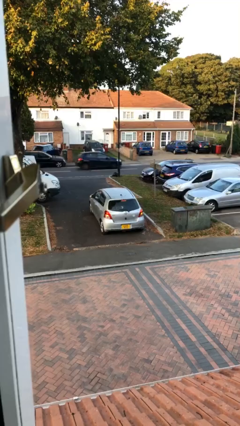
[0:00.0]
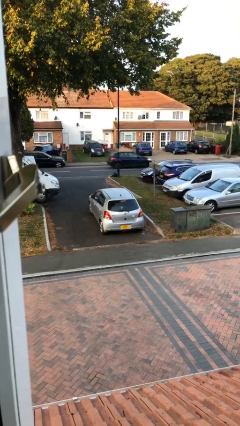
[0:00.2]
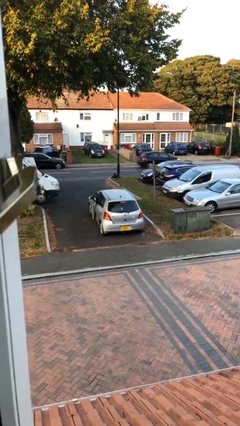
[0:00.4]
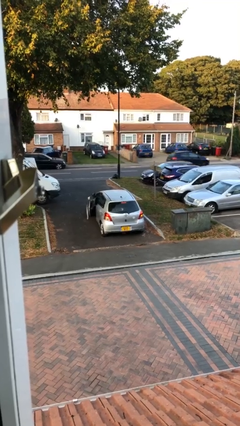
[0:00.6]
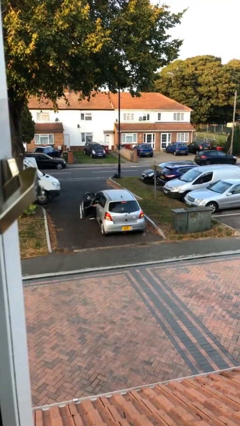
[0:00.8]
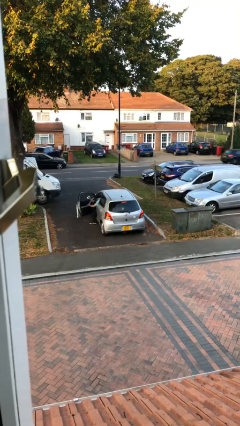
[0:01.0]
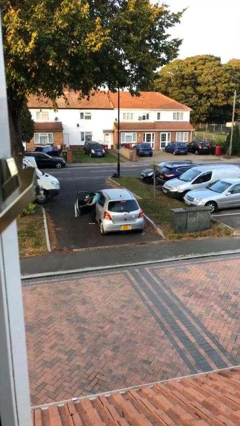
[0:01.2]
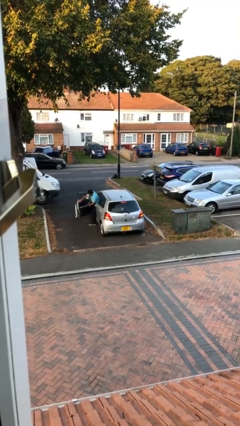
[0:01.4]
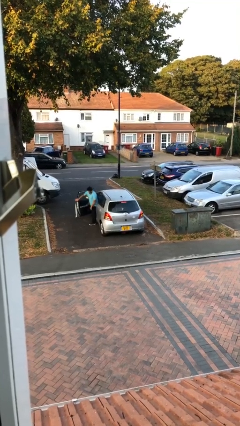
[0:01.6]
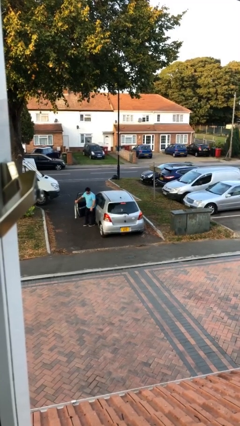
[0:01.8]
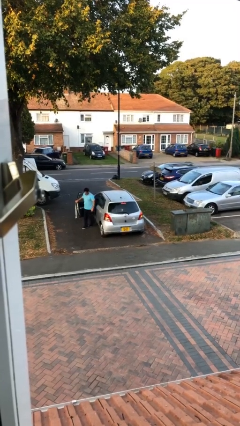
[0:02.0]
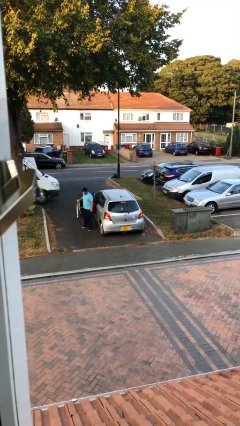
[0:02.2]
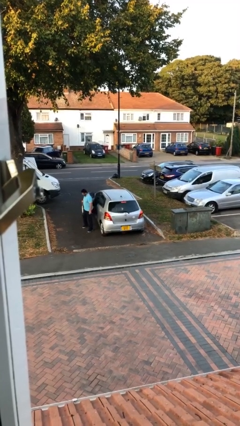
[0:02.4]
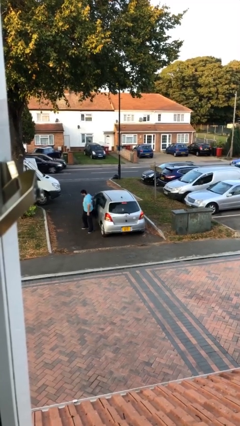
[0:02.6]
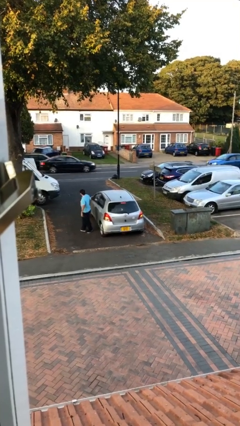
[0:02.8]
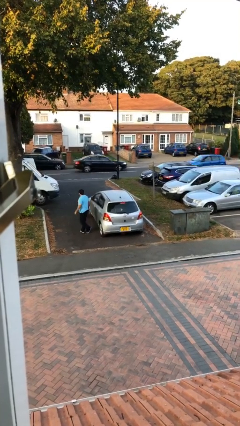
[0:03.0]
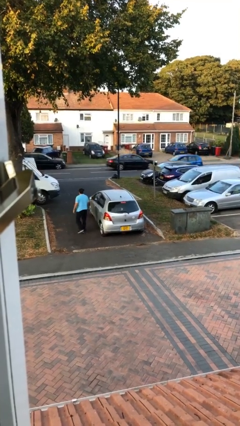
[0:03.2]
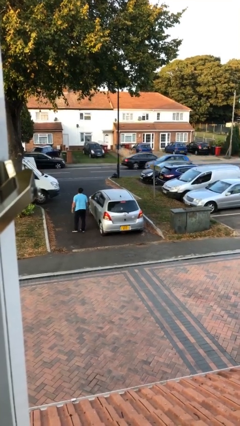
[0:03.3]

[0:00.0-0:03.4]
car drops off person

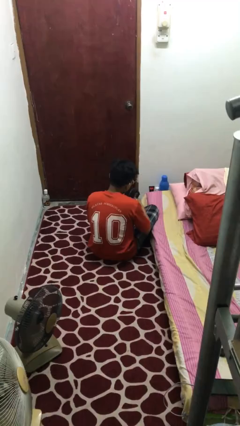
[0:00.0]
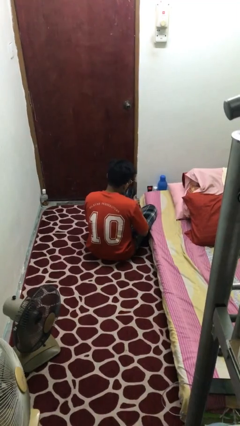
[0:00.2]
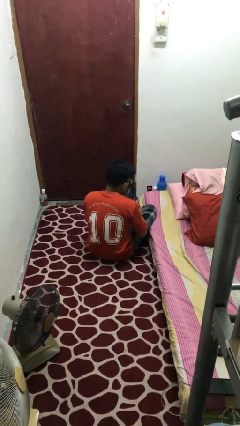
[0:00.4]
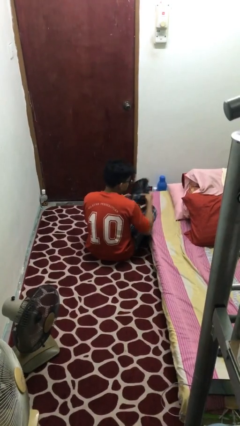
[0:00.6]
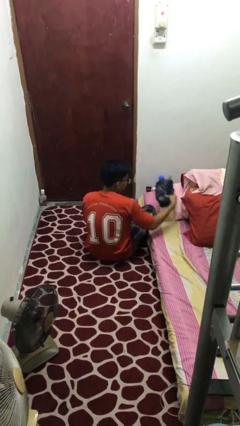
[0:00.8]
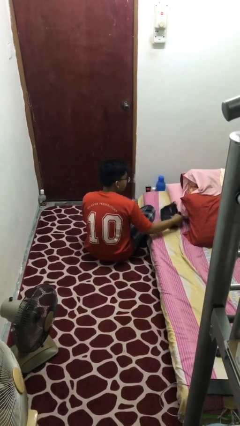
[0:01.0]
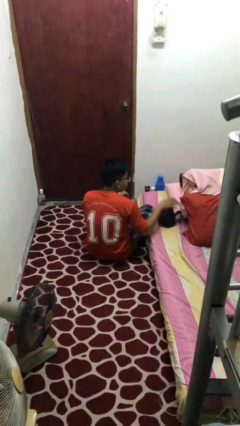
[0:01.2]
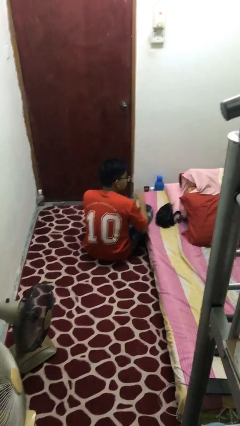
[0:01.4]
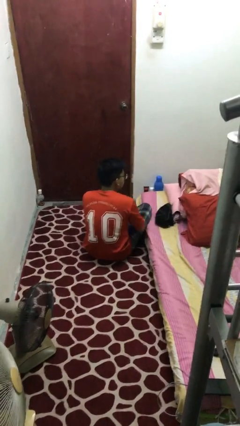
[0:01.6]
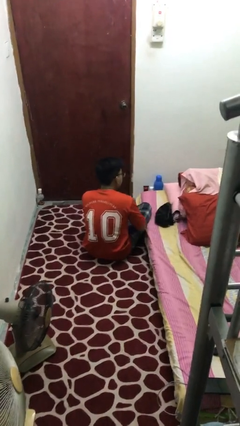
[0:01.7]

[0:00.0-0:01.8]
person puts down object on bed

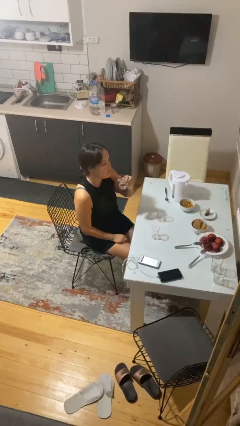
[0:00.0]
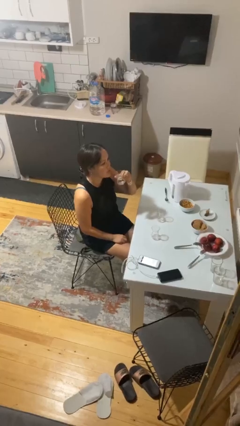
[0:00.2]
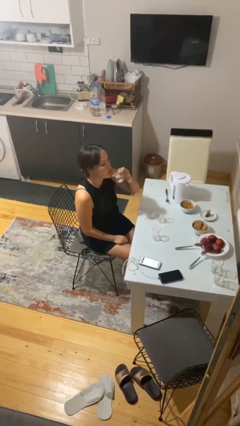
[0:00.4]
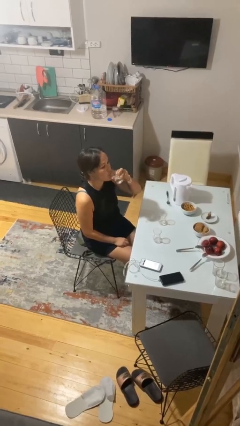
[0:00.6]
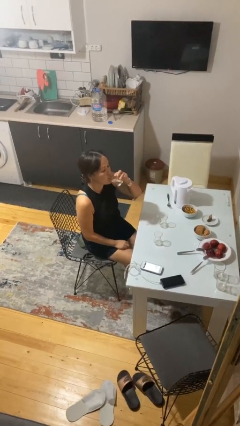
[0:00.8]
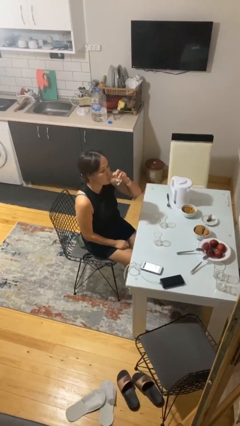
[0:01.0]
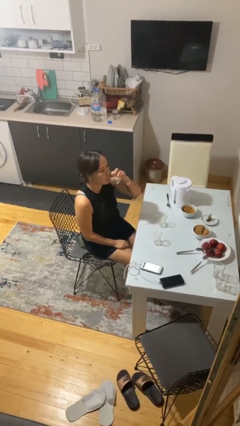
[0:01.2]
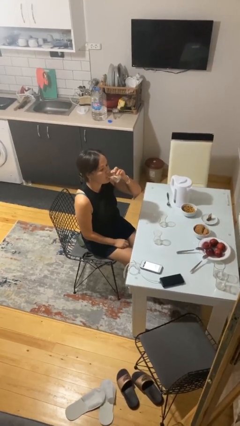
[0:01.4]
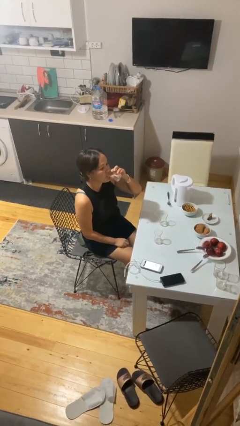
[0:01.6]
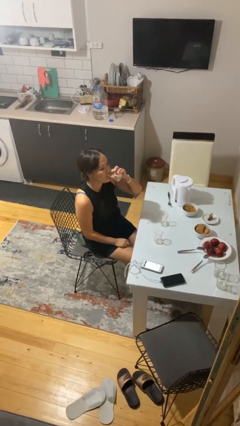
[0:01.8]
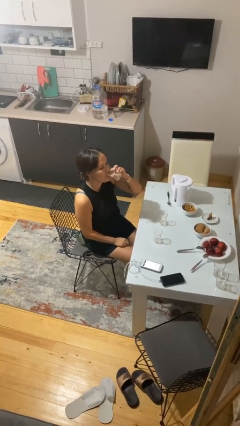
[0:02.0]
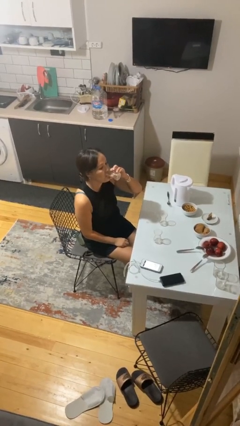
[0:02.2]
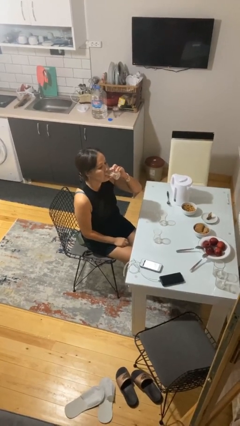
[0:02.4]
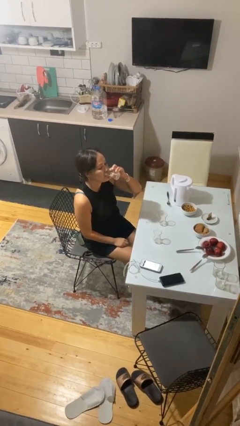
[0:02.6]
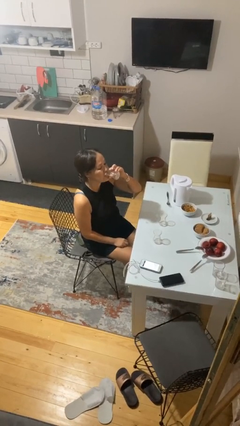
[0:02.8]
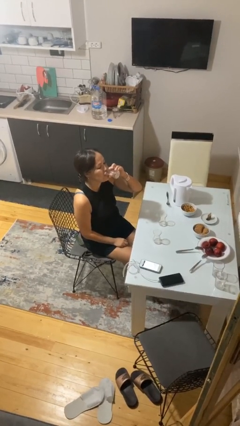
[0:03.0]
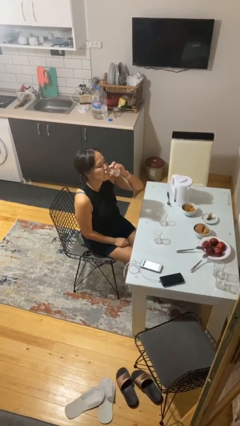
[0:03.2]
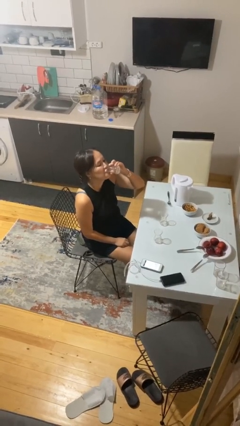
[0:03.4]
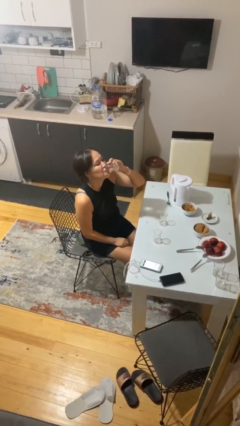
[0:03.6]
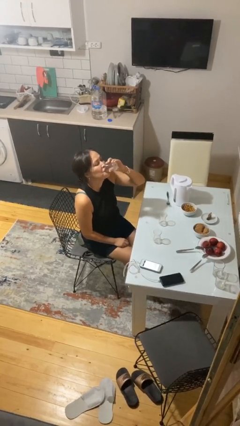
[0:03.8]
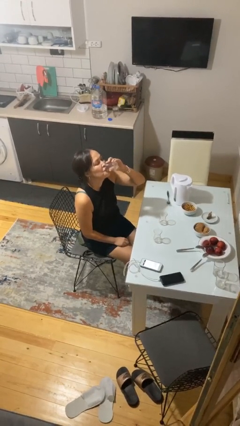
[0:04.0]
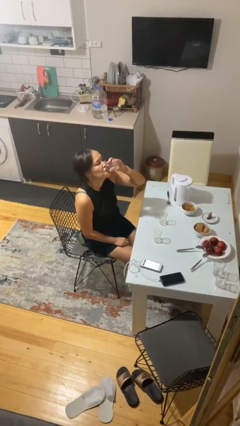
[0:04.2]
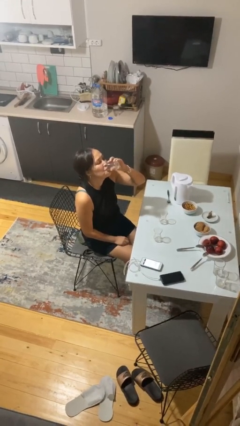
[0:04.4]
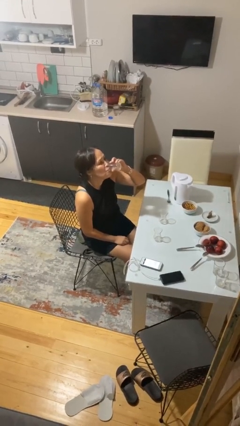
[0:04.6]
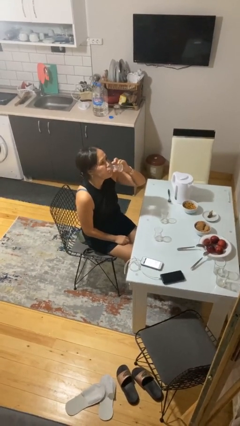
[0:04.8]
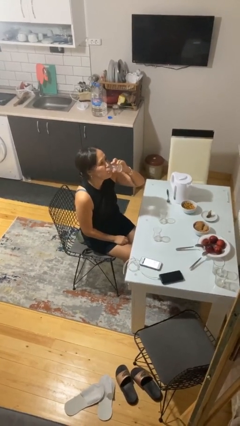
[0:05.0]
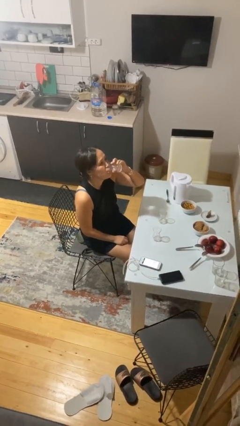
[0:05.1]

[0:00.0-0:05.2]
person drinks from shotglass

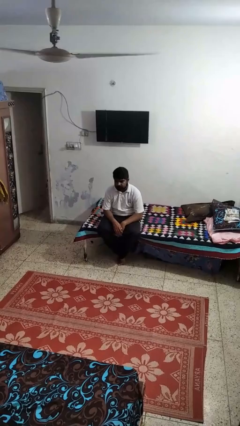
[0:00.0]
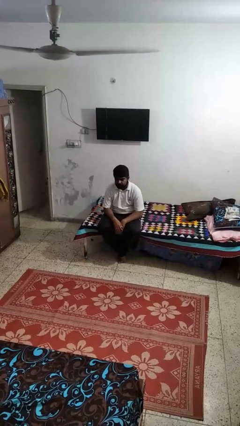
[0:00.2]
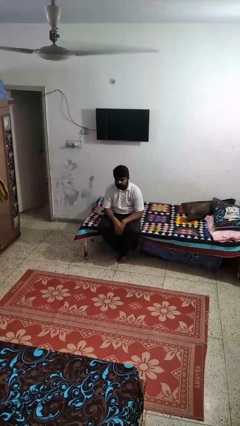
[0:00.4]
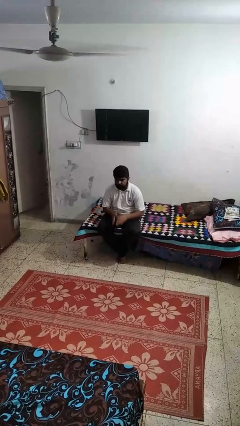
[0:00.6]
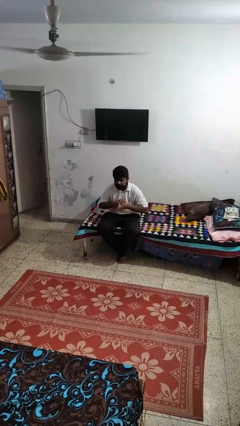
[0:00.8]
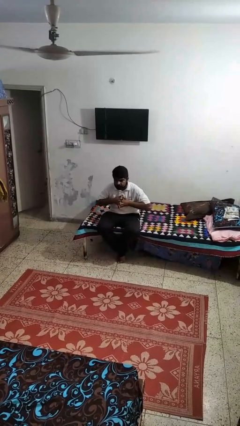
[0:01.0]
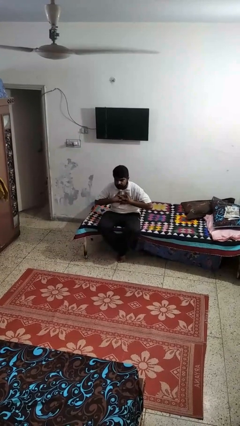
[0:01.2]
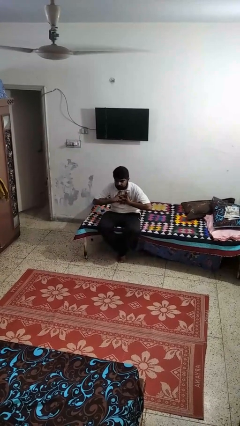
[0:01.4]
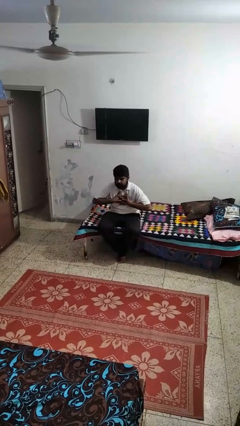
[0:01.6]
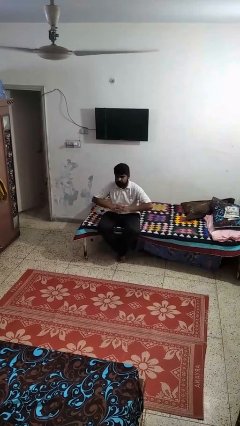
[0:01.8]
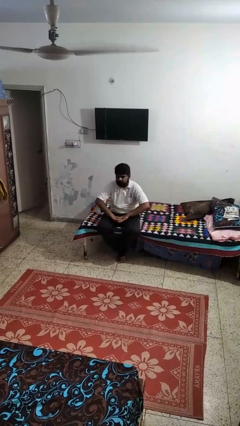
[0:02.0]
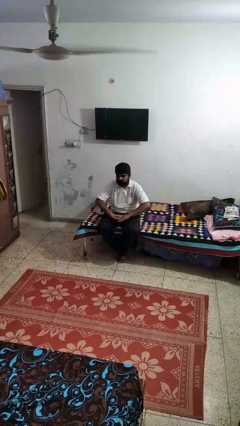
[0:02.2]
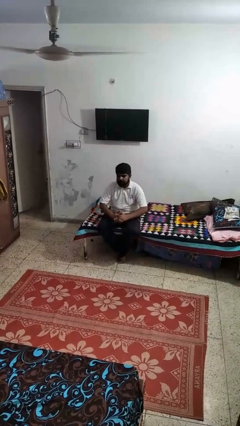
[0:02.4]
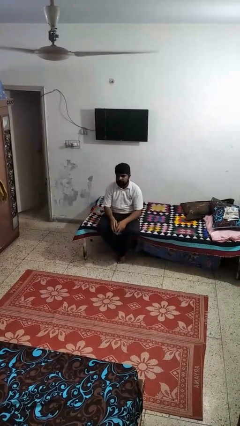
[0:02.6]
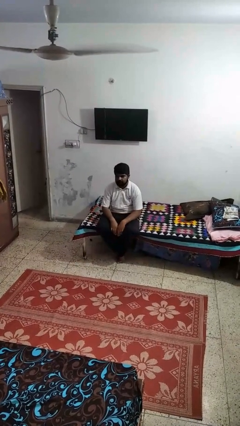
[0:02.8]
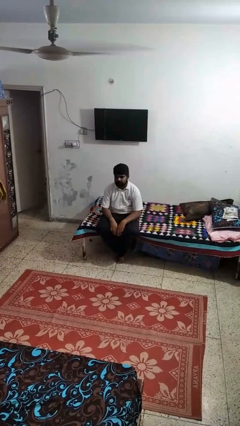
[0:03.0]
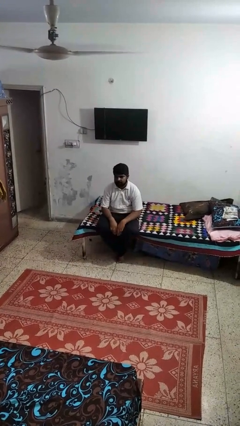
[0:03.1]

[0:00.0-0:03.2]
person cracks knuckles

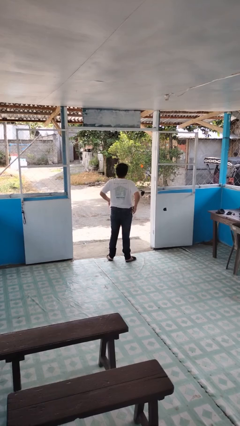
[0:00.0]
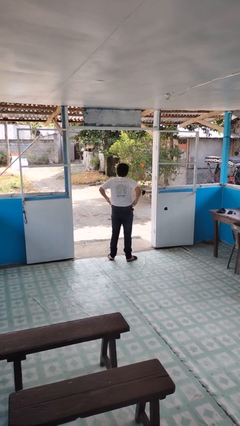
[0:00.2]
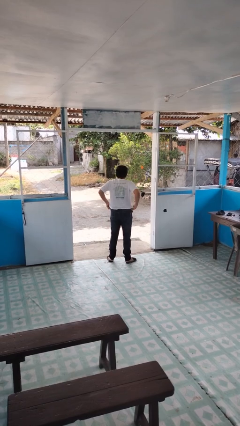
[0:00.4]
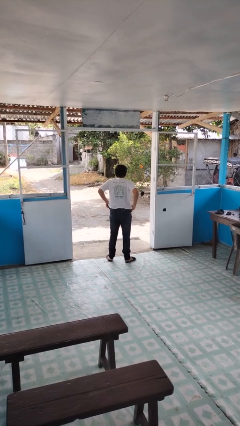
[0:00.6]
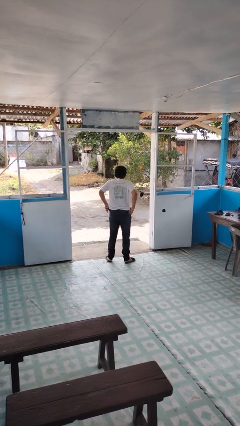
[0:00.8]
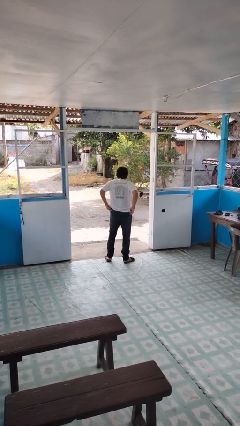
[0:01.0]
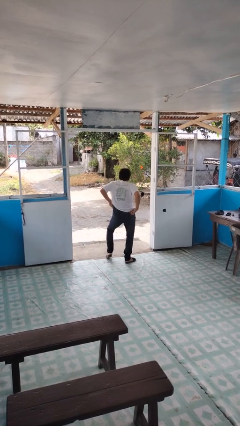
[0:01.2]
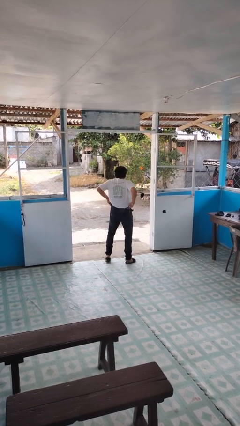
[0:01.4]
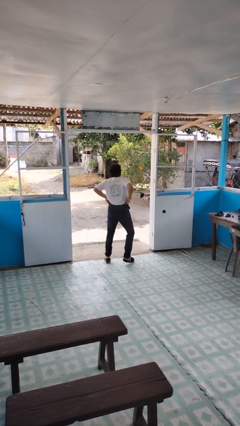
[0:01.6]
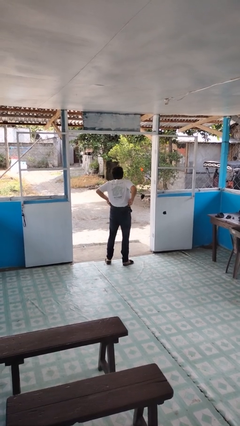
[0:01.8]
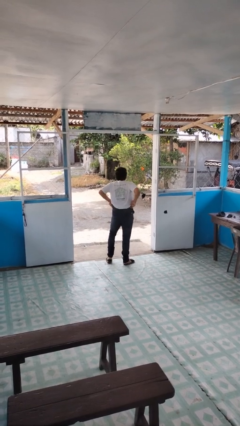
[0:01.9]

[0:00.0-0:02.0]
person hikes up pants

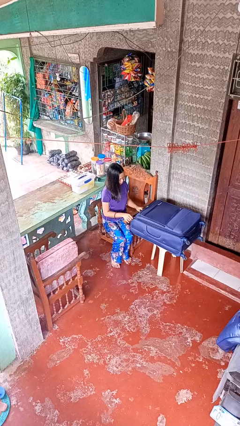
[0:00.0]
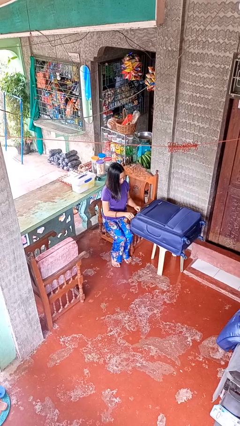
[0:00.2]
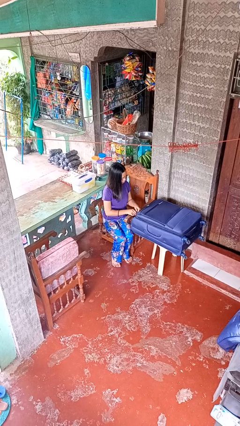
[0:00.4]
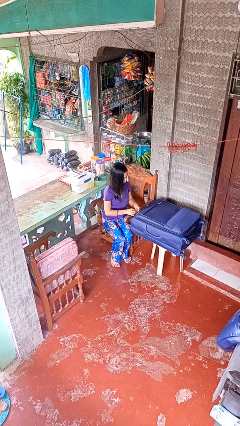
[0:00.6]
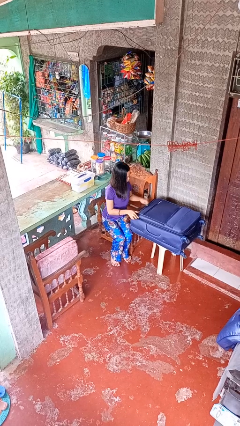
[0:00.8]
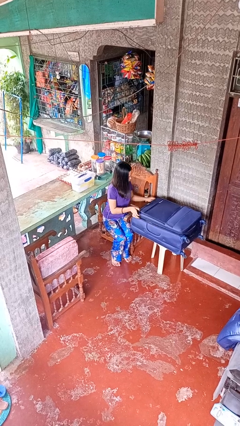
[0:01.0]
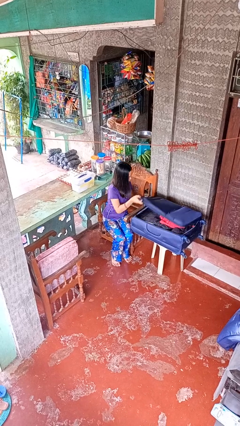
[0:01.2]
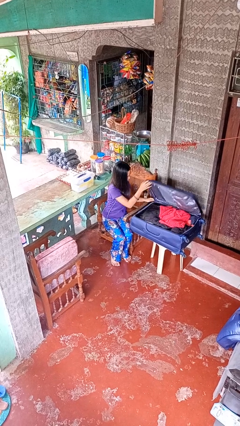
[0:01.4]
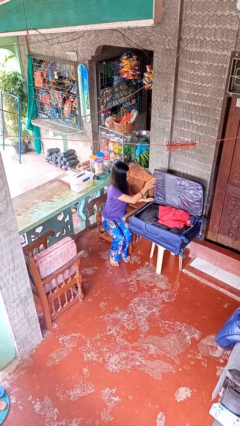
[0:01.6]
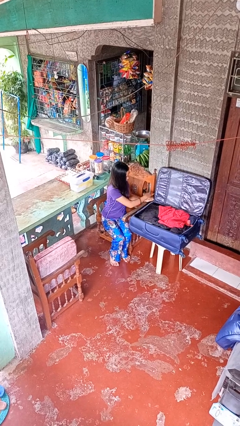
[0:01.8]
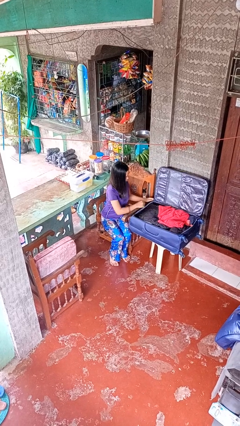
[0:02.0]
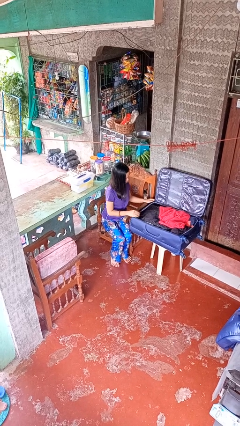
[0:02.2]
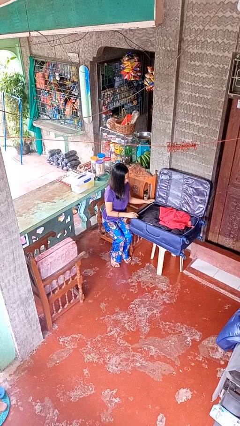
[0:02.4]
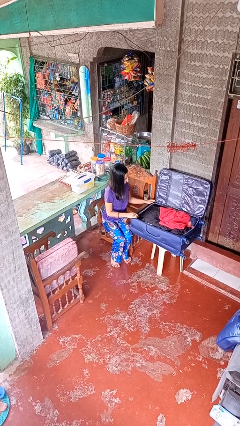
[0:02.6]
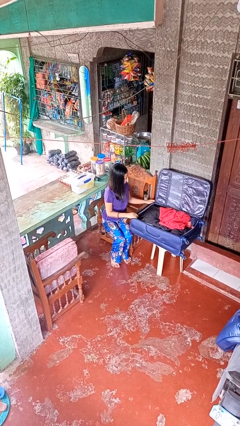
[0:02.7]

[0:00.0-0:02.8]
person opens suitcase
